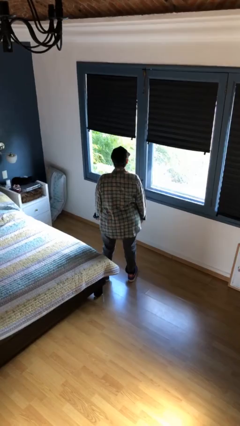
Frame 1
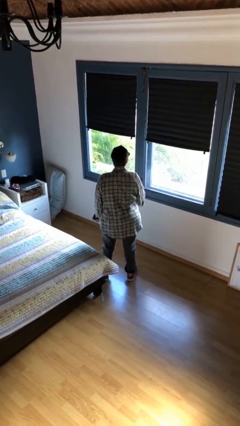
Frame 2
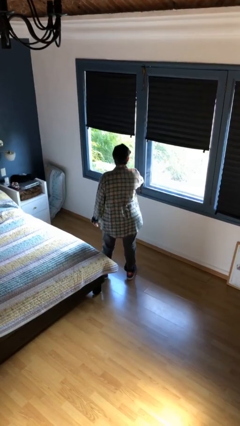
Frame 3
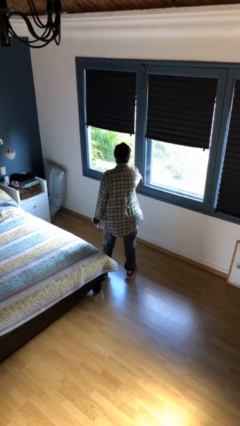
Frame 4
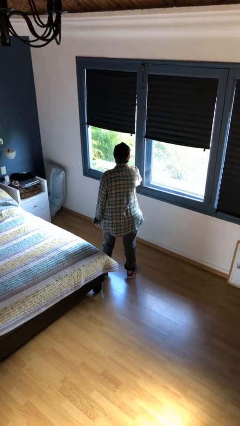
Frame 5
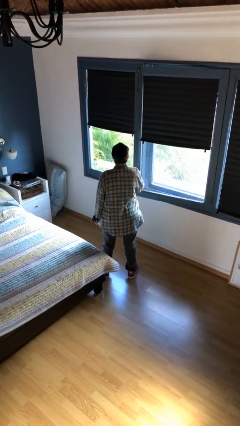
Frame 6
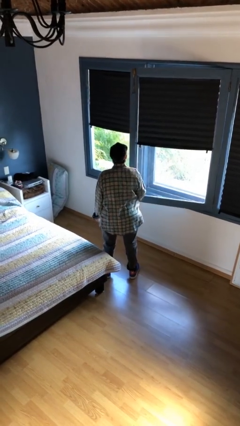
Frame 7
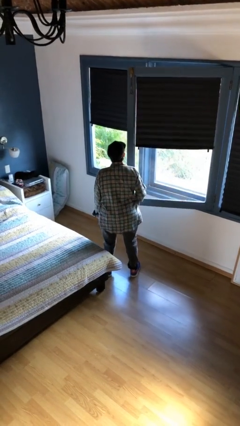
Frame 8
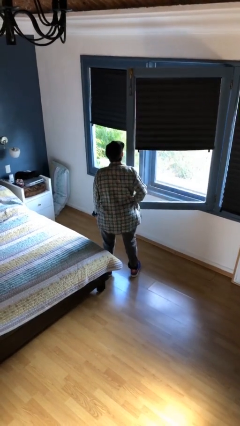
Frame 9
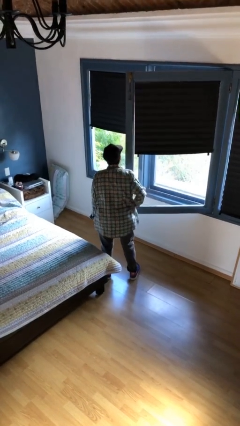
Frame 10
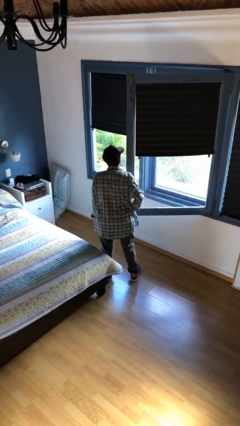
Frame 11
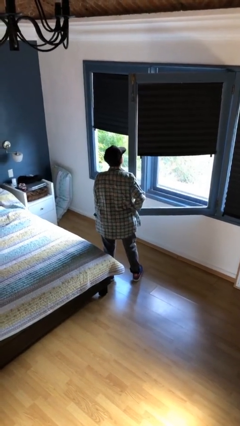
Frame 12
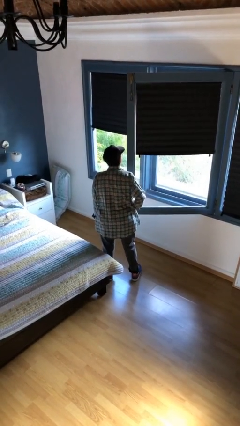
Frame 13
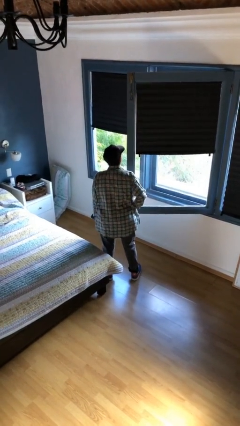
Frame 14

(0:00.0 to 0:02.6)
person opens home window

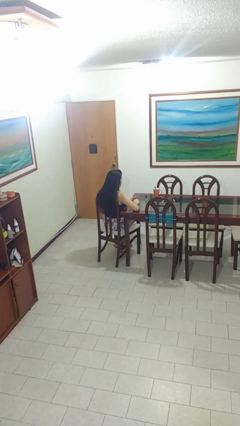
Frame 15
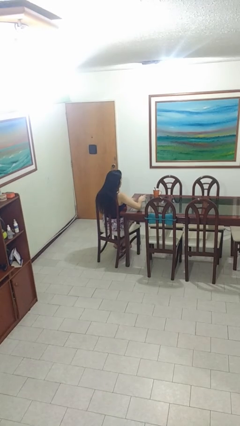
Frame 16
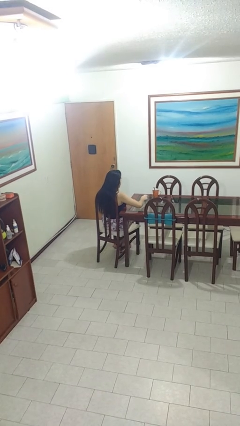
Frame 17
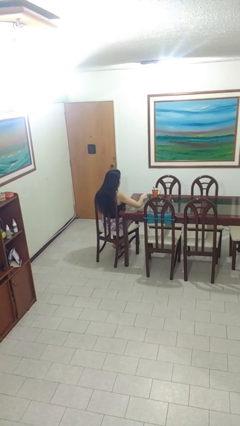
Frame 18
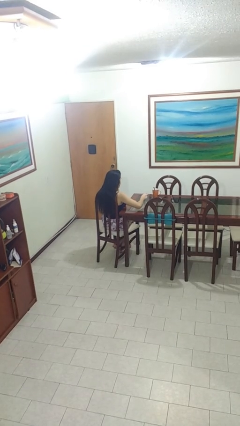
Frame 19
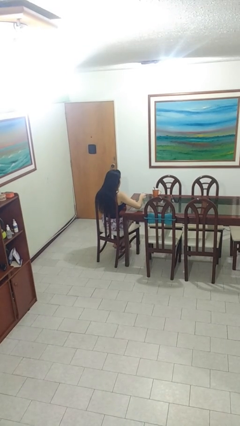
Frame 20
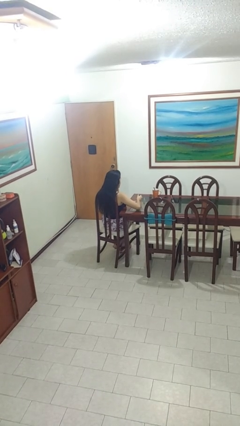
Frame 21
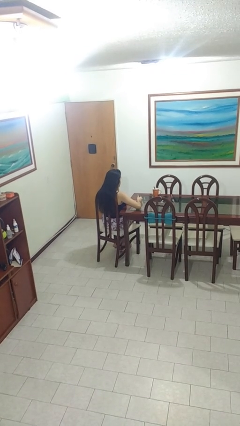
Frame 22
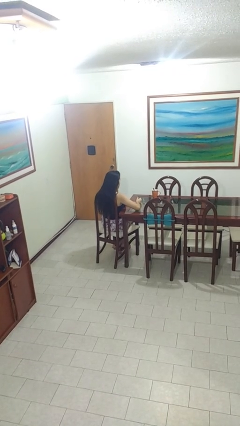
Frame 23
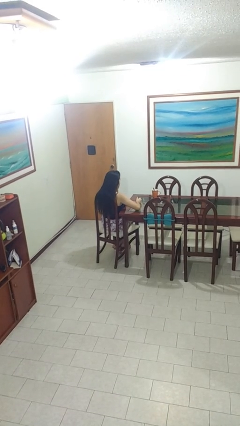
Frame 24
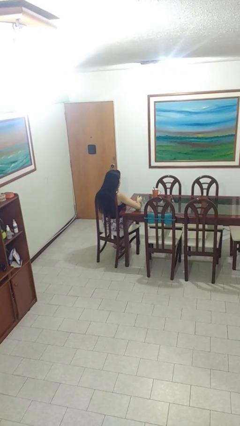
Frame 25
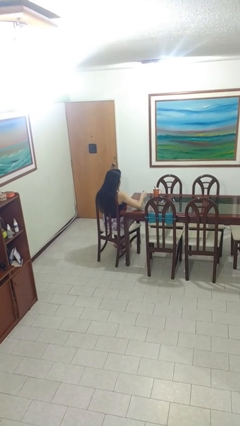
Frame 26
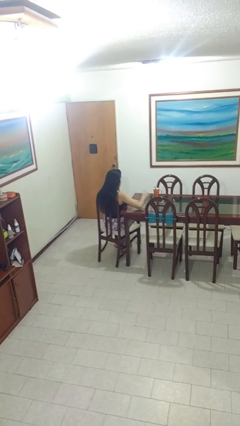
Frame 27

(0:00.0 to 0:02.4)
person paints fingernails

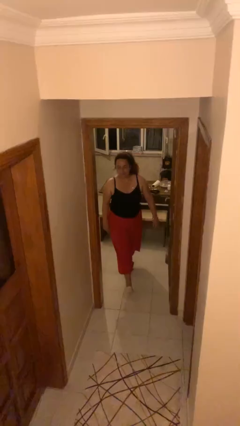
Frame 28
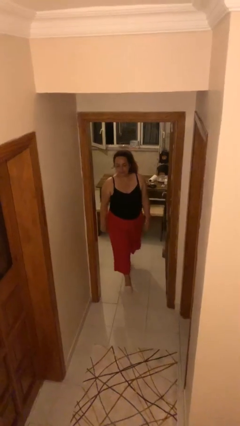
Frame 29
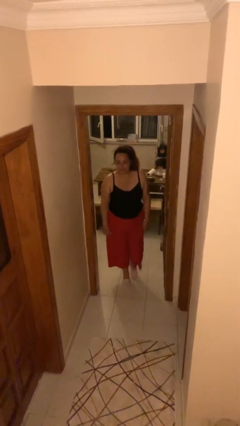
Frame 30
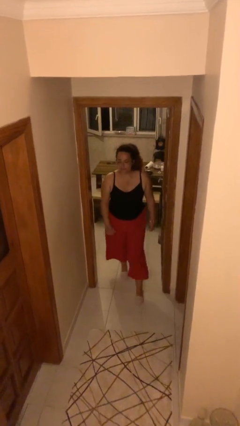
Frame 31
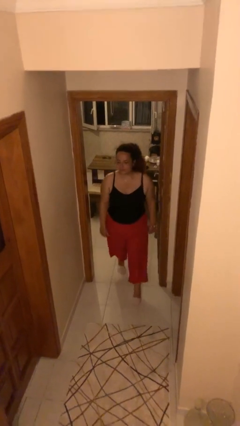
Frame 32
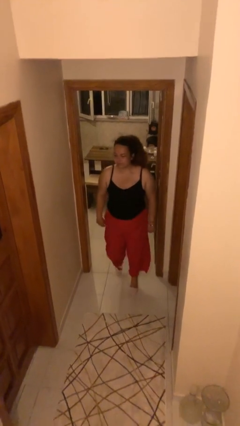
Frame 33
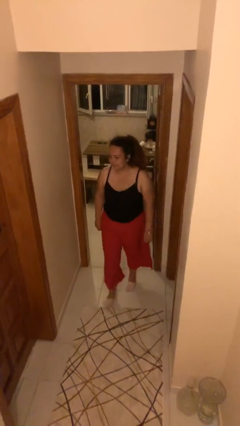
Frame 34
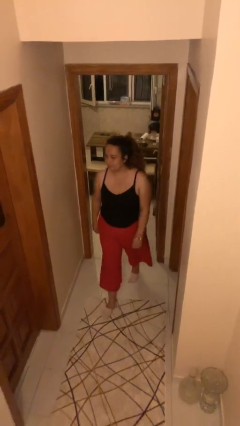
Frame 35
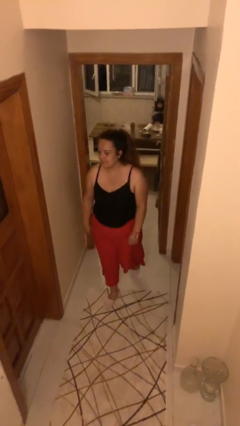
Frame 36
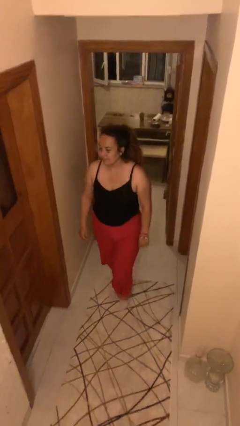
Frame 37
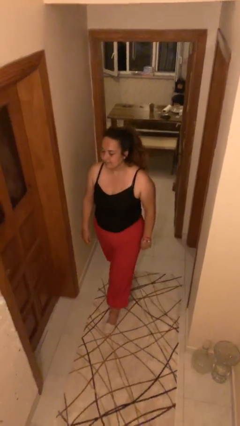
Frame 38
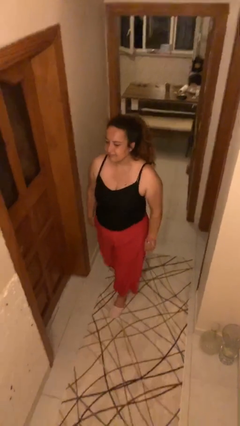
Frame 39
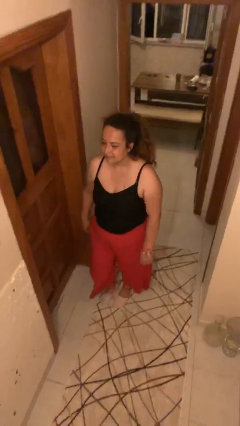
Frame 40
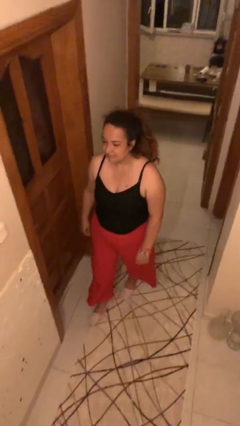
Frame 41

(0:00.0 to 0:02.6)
person enters scene through structure

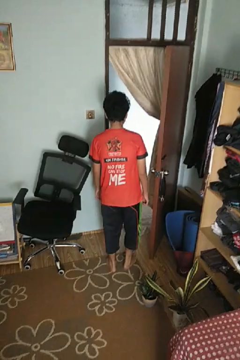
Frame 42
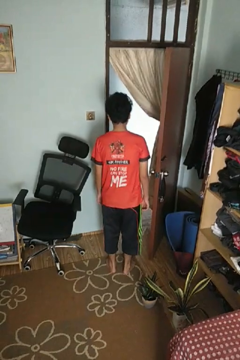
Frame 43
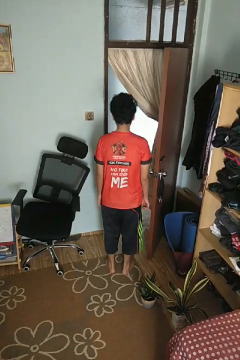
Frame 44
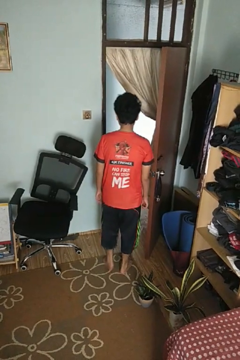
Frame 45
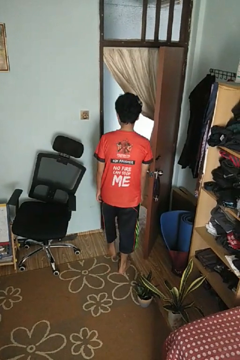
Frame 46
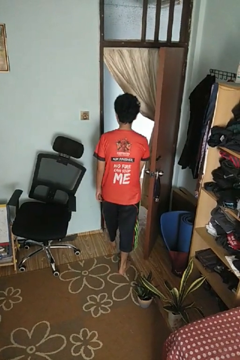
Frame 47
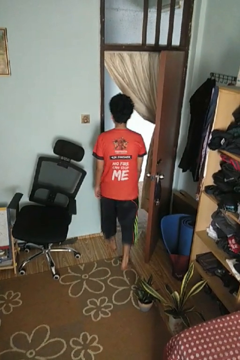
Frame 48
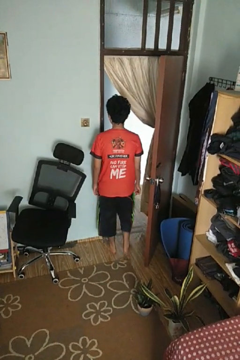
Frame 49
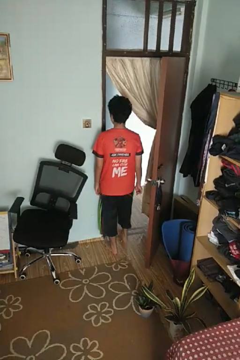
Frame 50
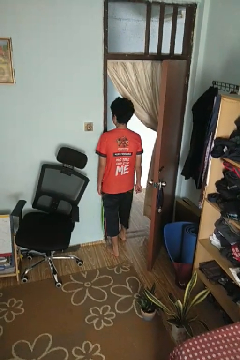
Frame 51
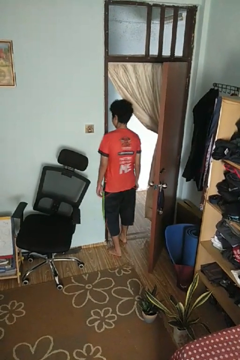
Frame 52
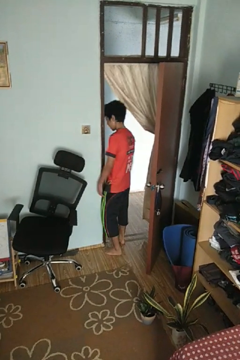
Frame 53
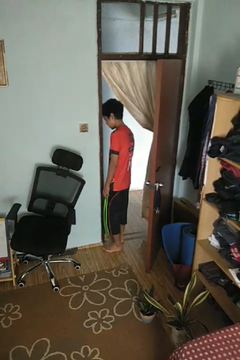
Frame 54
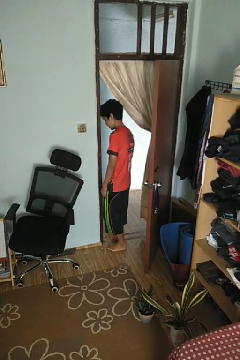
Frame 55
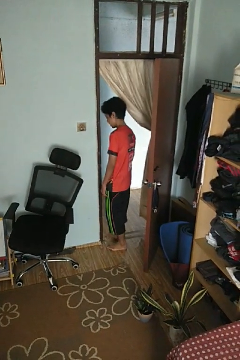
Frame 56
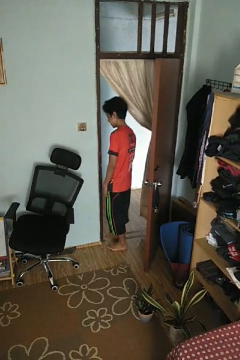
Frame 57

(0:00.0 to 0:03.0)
person bumps into wall

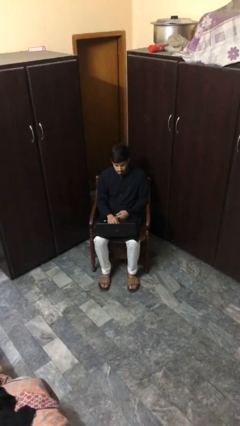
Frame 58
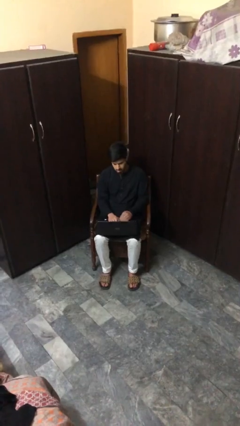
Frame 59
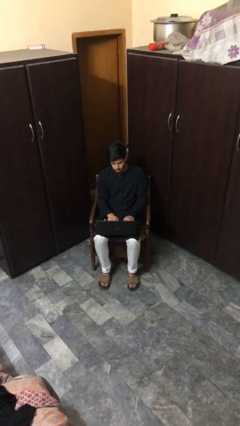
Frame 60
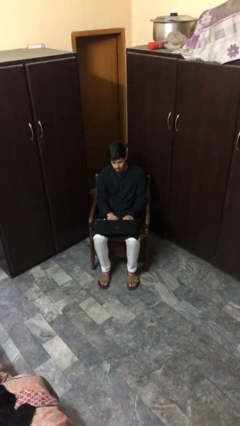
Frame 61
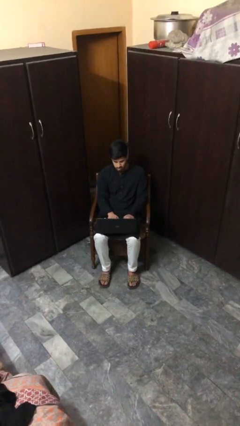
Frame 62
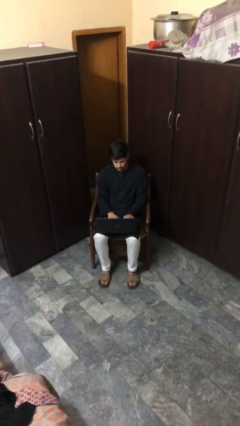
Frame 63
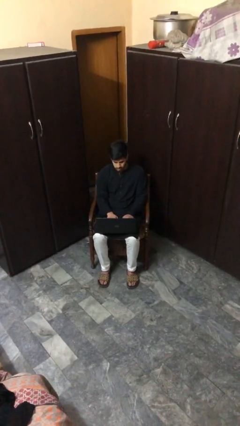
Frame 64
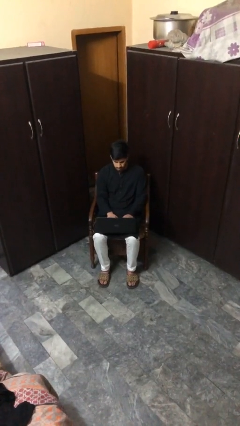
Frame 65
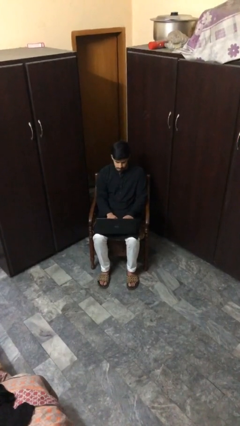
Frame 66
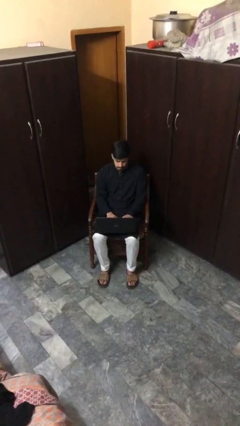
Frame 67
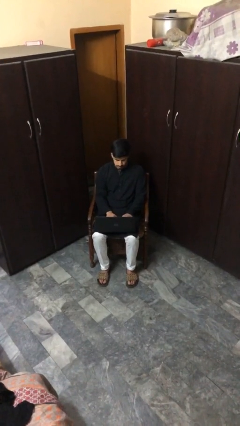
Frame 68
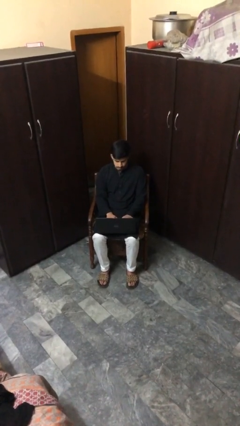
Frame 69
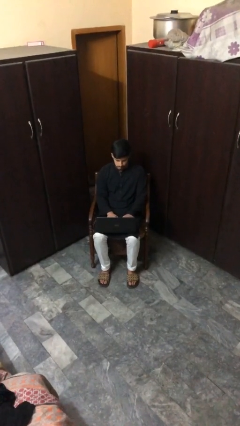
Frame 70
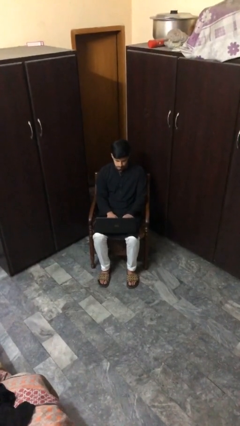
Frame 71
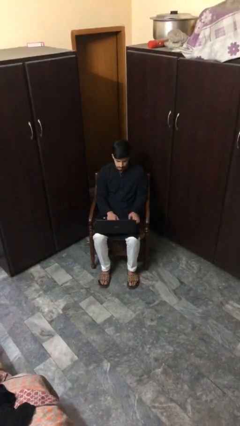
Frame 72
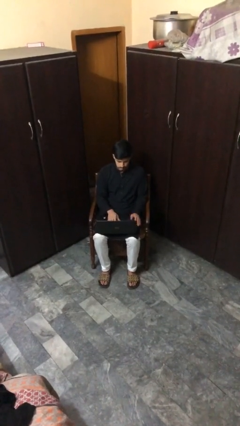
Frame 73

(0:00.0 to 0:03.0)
person interacts with laptop

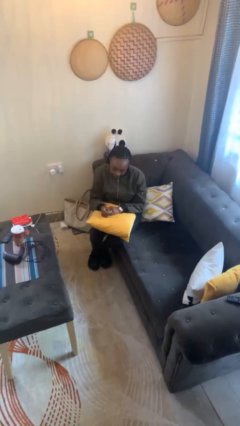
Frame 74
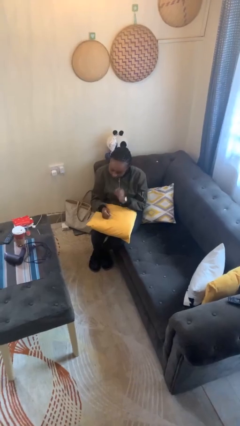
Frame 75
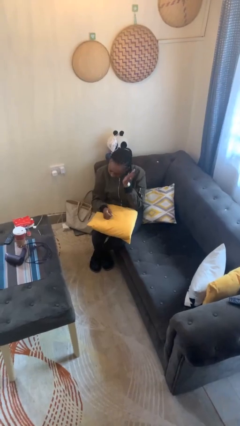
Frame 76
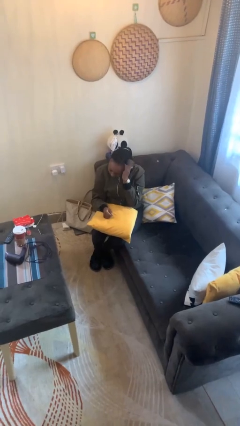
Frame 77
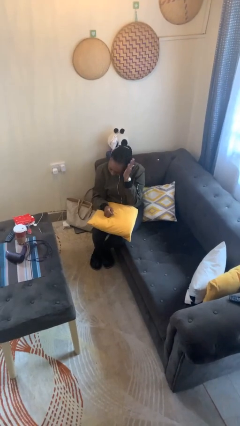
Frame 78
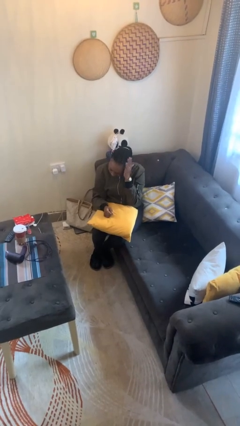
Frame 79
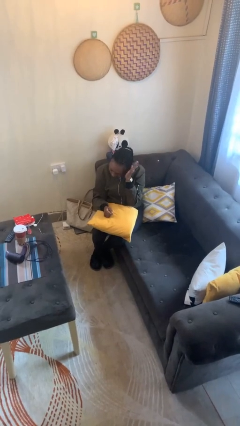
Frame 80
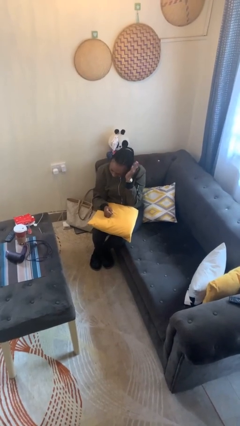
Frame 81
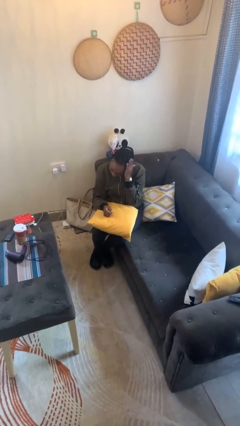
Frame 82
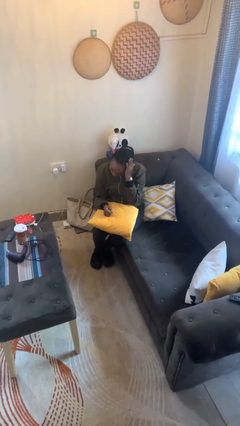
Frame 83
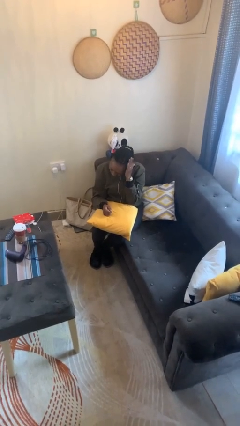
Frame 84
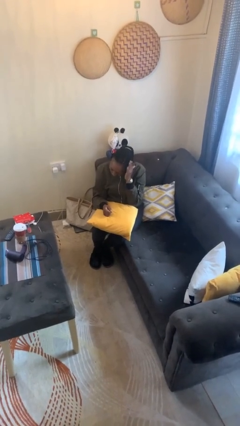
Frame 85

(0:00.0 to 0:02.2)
person pats head

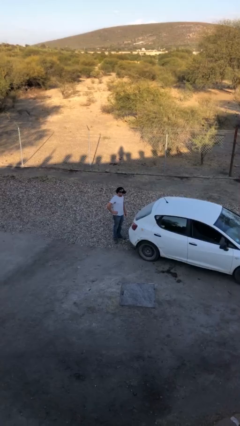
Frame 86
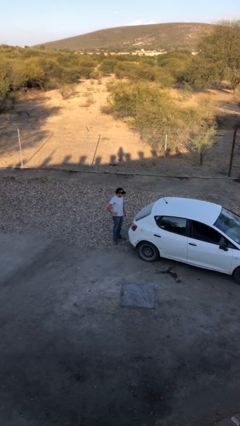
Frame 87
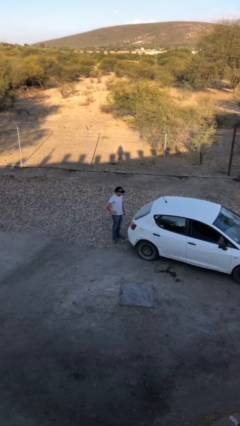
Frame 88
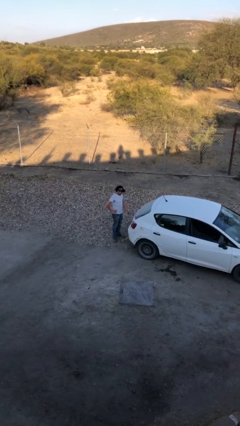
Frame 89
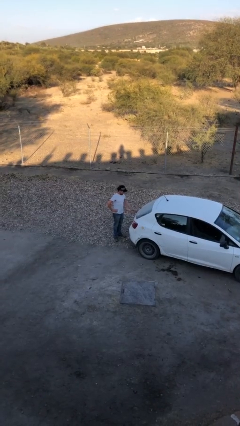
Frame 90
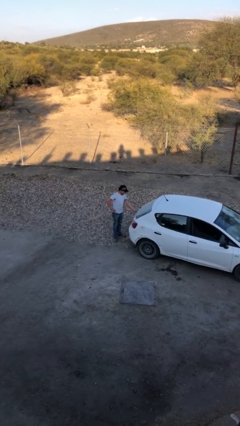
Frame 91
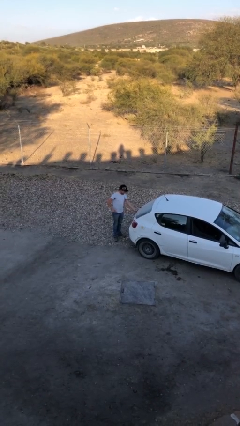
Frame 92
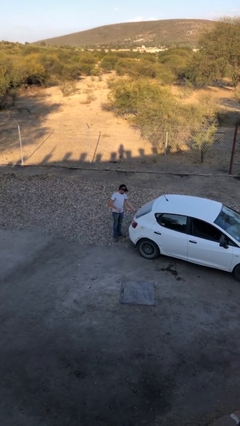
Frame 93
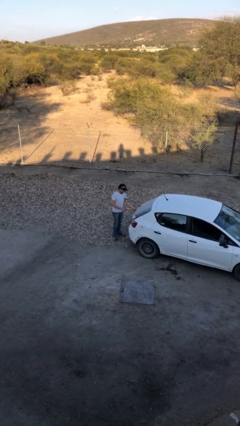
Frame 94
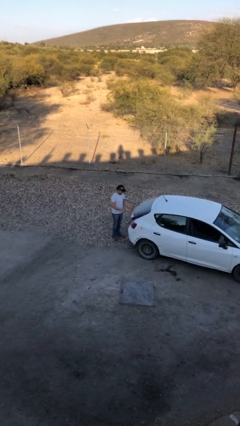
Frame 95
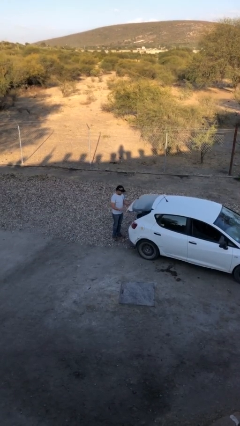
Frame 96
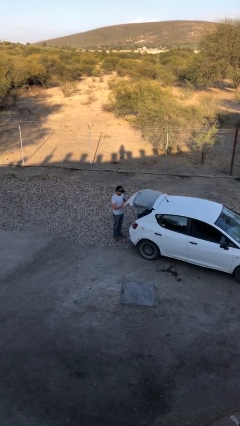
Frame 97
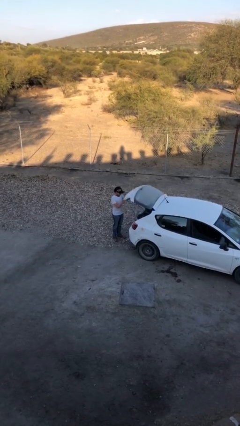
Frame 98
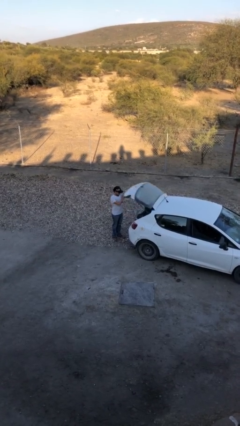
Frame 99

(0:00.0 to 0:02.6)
person opens car trunk
